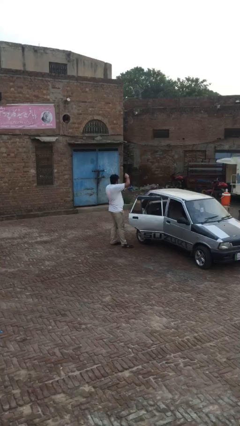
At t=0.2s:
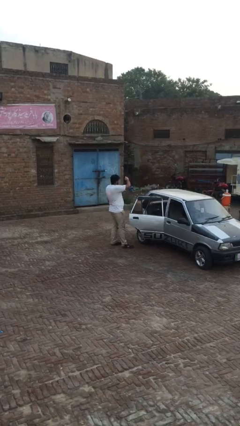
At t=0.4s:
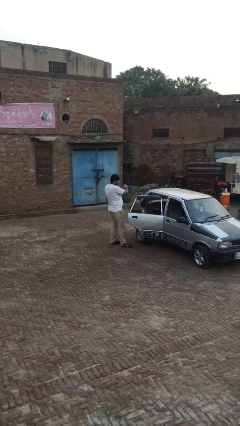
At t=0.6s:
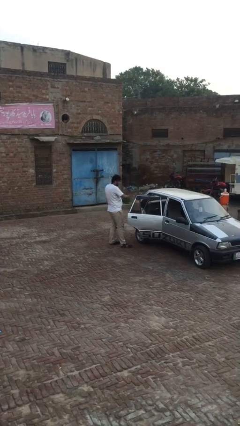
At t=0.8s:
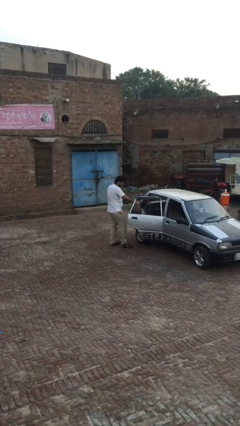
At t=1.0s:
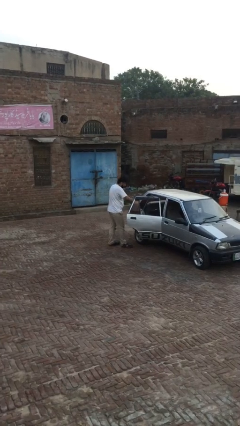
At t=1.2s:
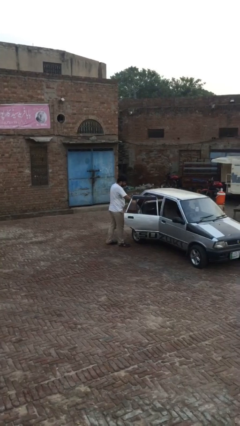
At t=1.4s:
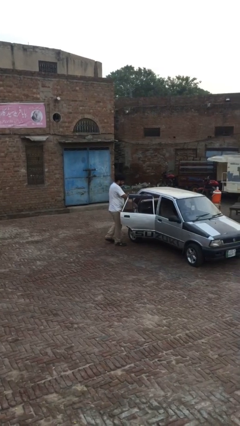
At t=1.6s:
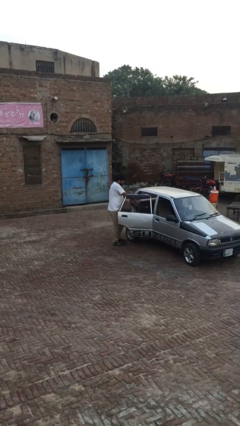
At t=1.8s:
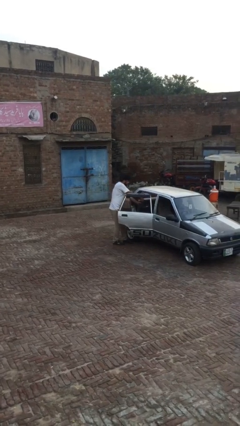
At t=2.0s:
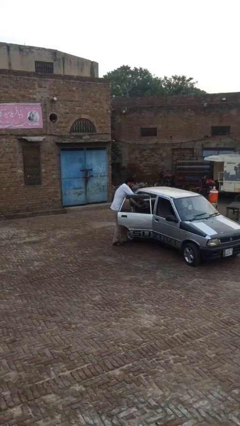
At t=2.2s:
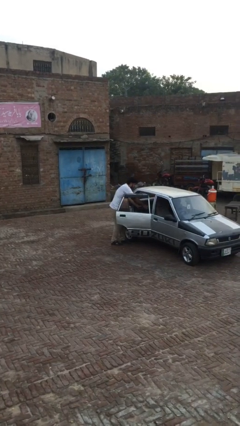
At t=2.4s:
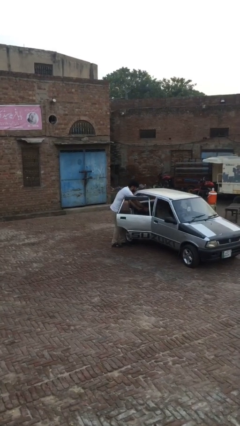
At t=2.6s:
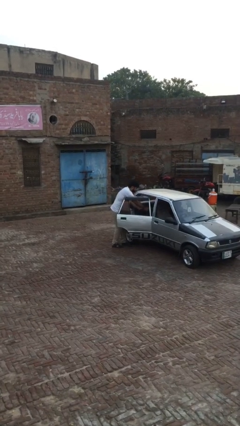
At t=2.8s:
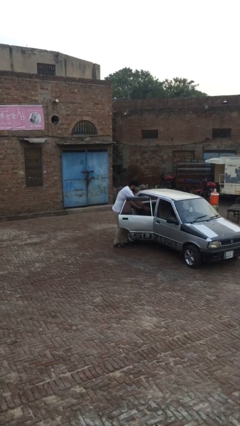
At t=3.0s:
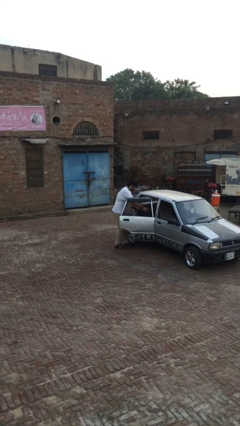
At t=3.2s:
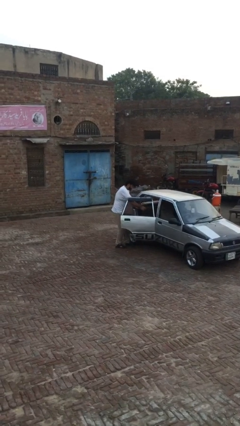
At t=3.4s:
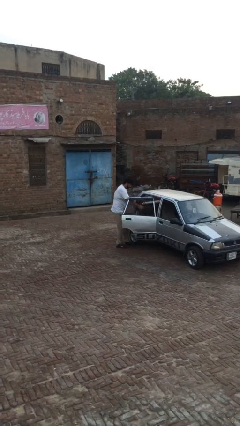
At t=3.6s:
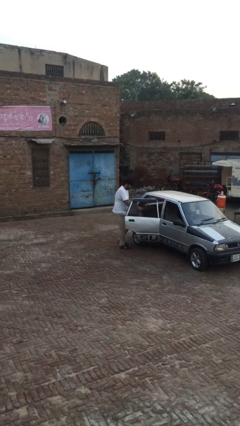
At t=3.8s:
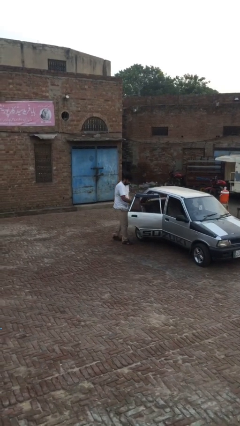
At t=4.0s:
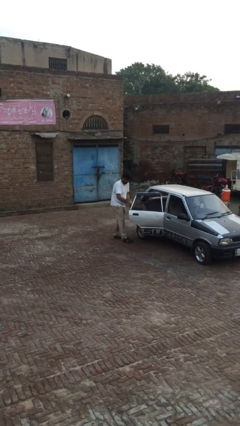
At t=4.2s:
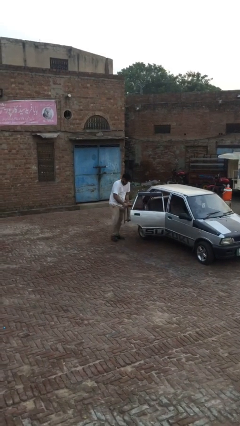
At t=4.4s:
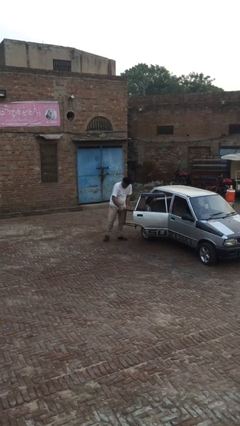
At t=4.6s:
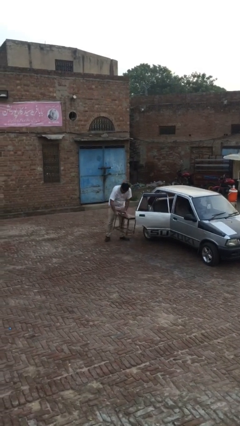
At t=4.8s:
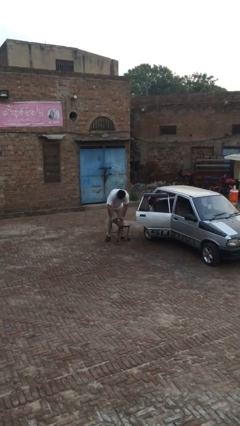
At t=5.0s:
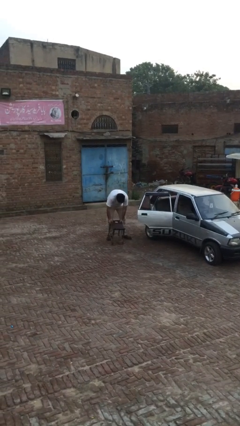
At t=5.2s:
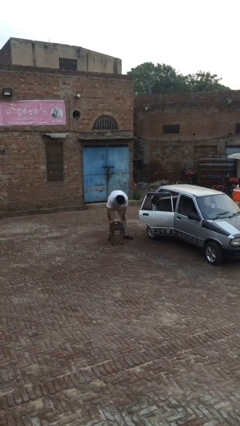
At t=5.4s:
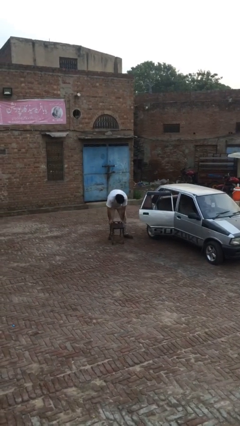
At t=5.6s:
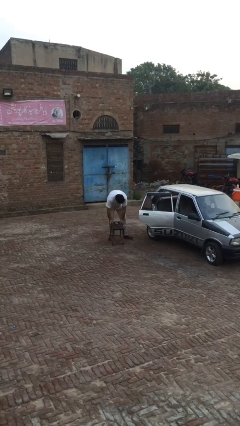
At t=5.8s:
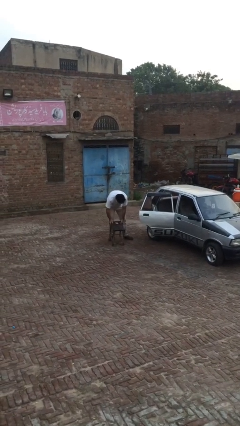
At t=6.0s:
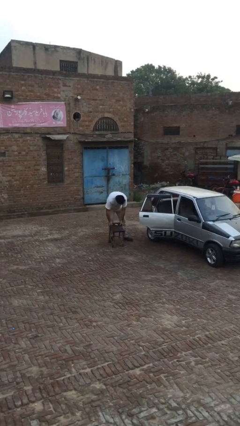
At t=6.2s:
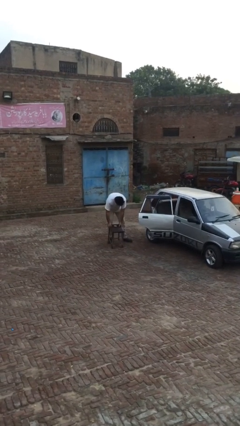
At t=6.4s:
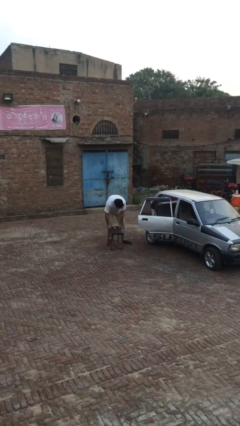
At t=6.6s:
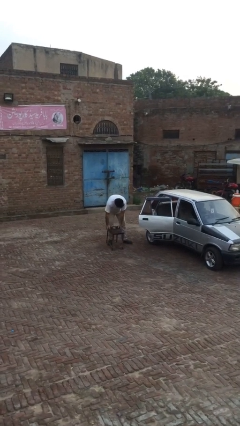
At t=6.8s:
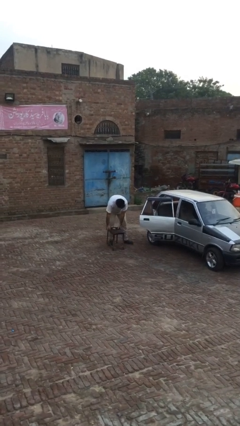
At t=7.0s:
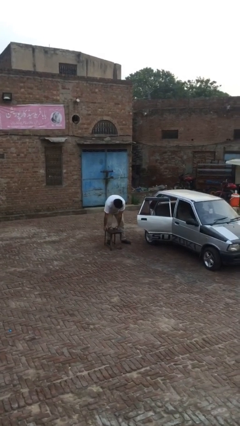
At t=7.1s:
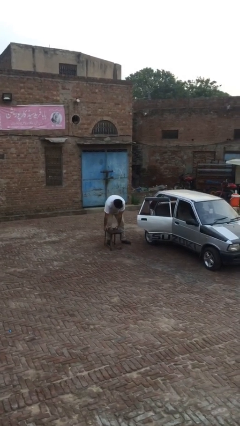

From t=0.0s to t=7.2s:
person unloads car

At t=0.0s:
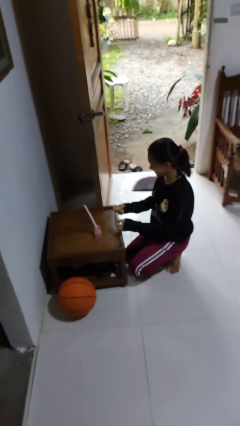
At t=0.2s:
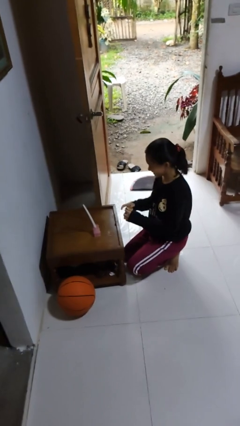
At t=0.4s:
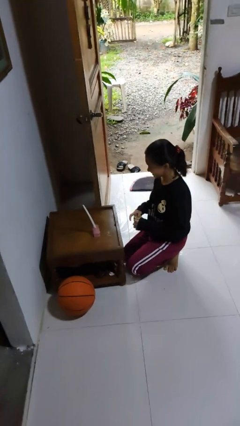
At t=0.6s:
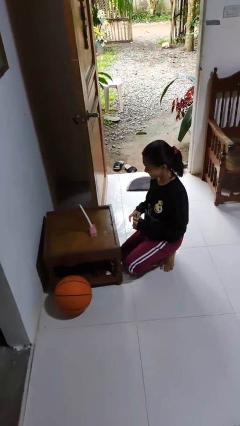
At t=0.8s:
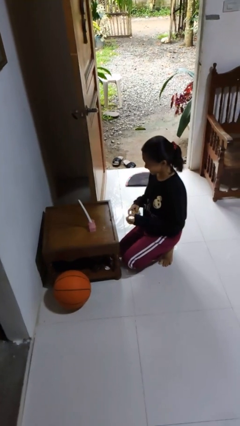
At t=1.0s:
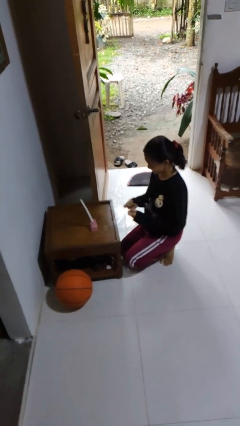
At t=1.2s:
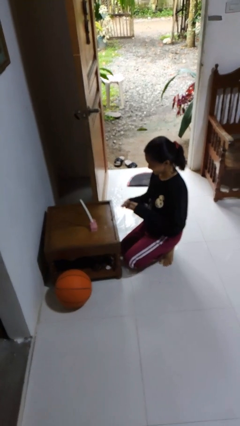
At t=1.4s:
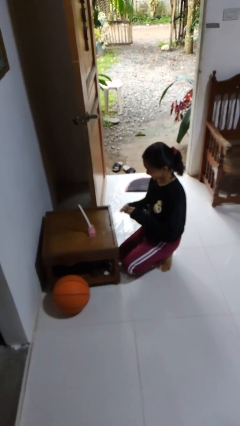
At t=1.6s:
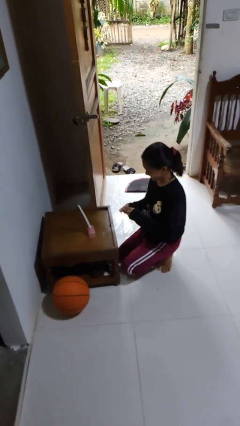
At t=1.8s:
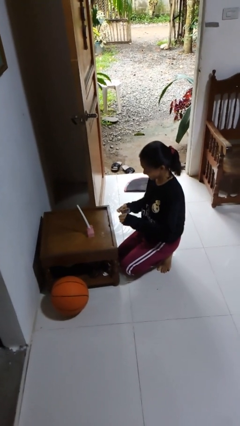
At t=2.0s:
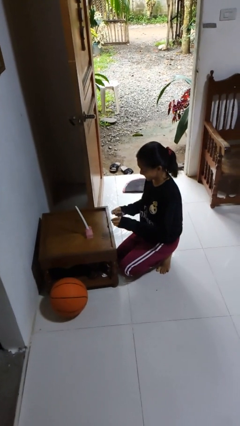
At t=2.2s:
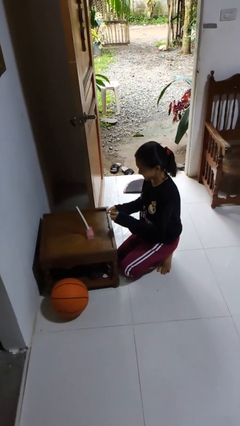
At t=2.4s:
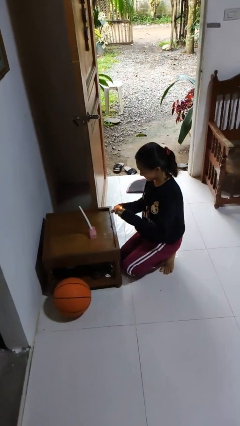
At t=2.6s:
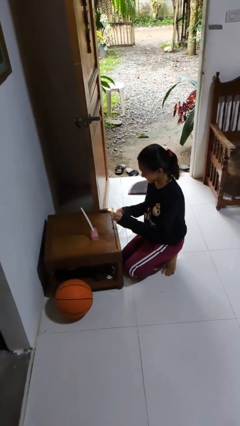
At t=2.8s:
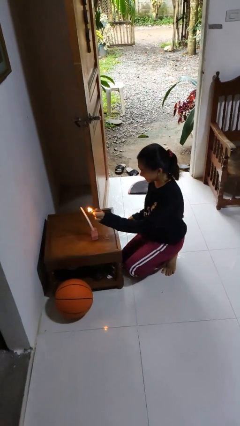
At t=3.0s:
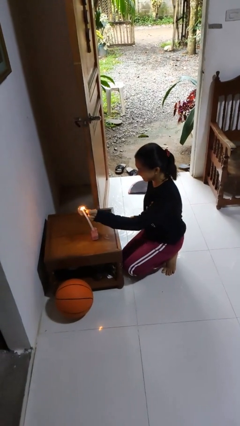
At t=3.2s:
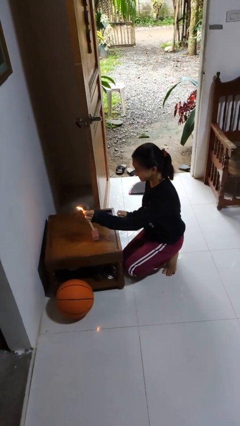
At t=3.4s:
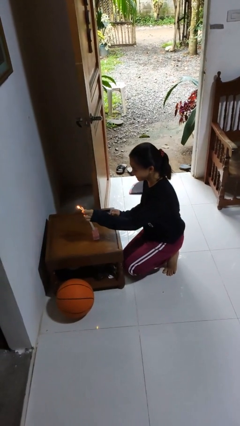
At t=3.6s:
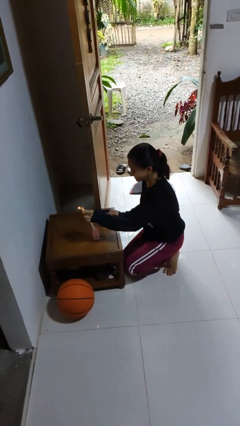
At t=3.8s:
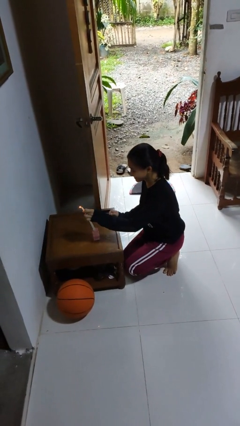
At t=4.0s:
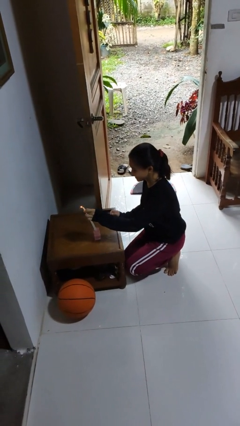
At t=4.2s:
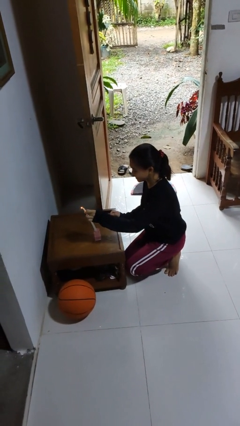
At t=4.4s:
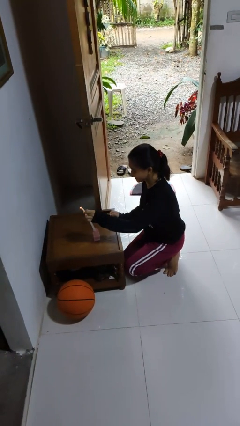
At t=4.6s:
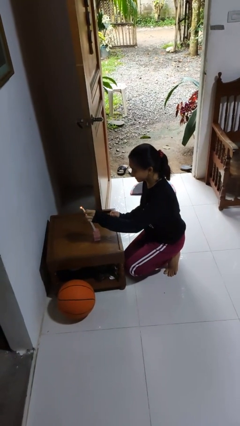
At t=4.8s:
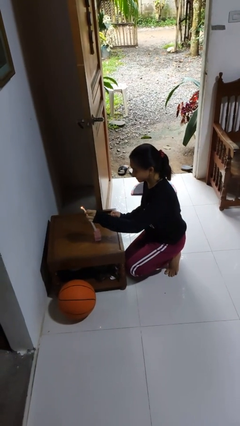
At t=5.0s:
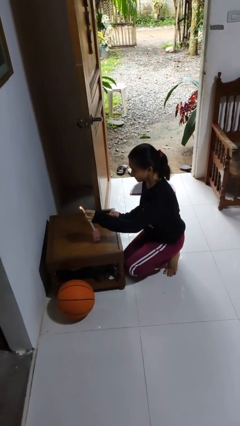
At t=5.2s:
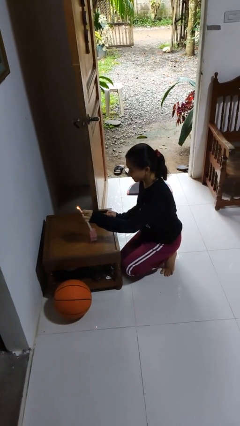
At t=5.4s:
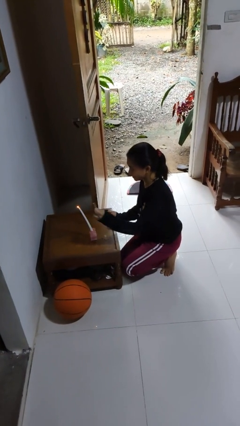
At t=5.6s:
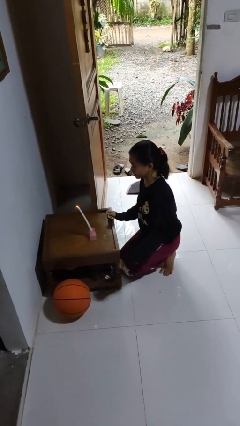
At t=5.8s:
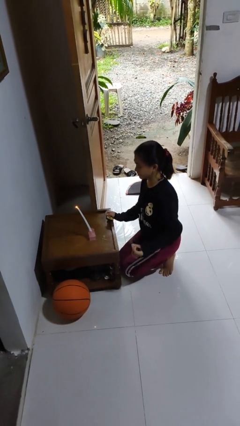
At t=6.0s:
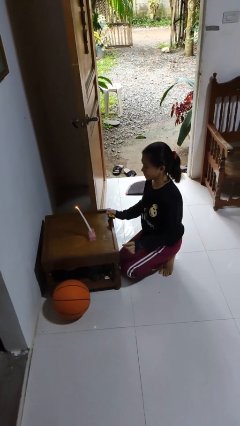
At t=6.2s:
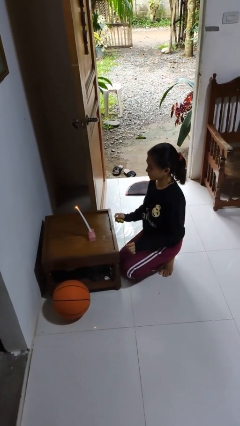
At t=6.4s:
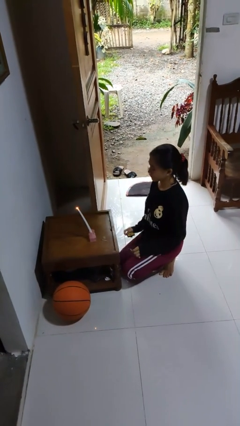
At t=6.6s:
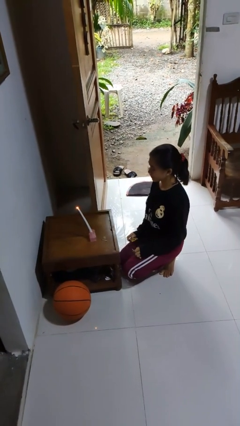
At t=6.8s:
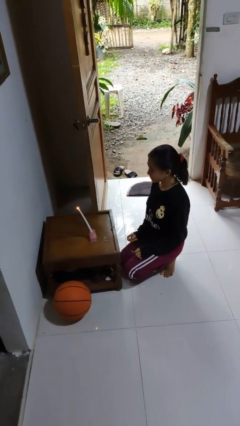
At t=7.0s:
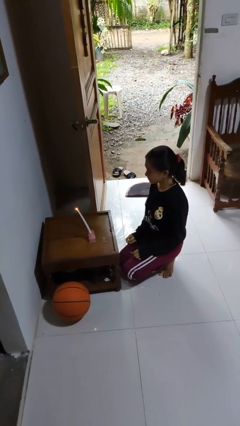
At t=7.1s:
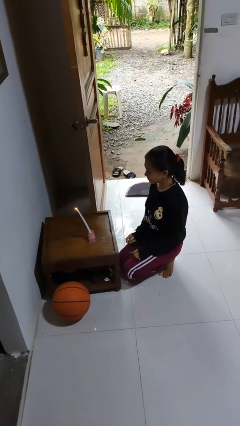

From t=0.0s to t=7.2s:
person lights candle

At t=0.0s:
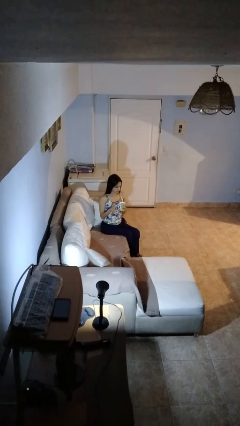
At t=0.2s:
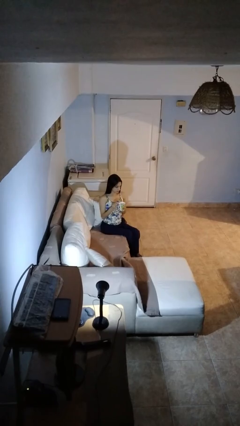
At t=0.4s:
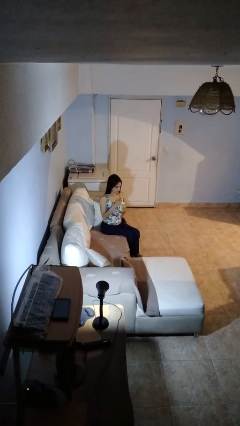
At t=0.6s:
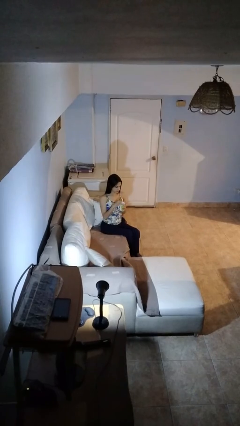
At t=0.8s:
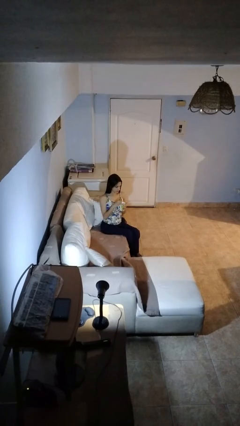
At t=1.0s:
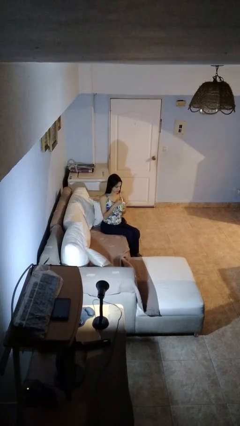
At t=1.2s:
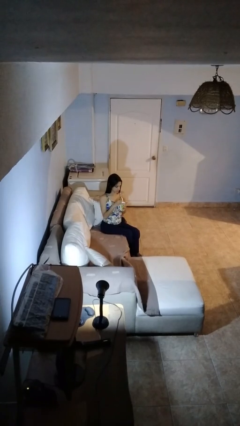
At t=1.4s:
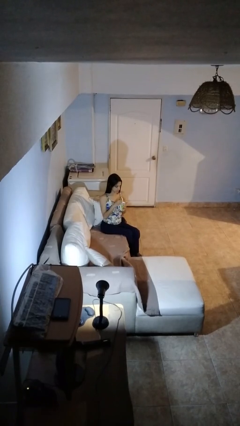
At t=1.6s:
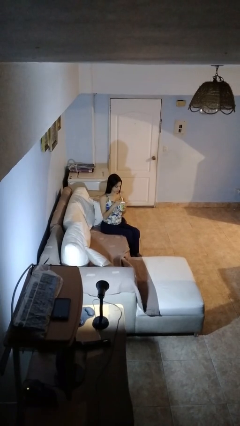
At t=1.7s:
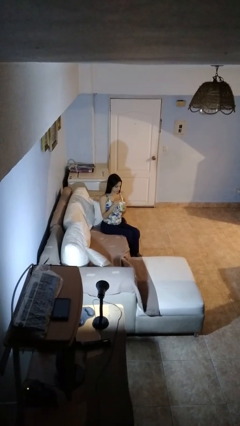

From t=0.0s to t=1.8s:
person stirs mug

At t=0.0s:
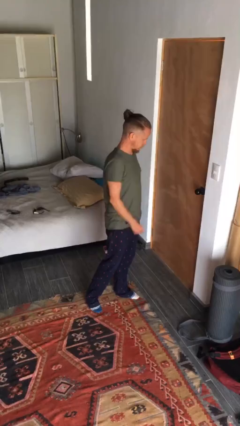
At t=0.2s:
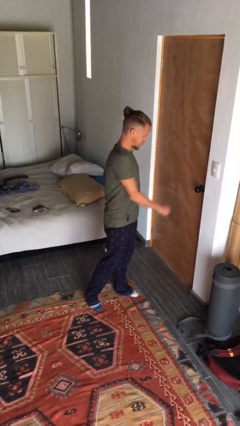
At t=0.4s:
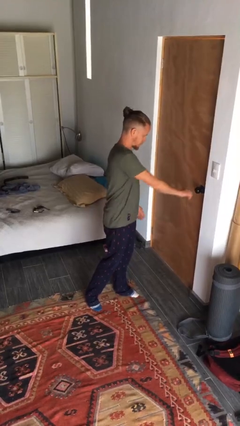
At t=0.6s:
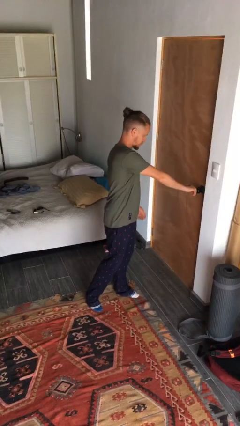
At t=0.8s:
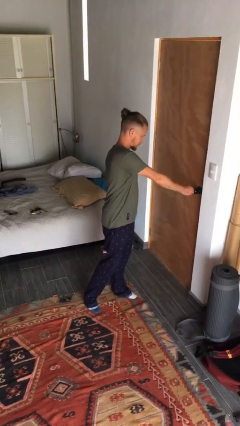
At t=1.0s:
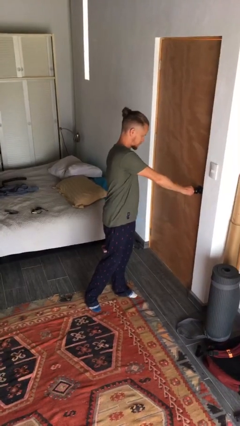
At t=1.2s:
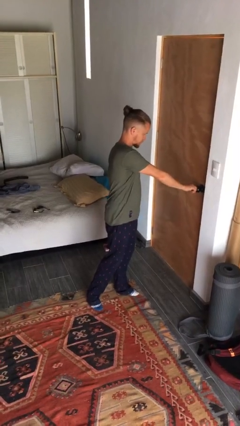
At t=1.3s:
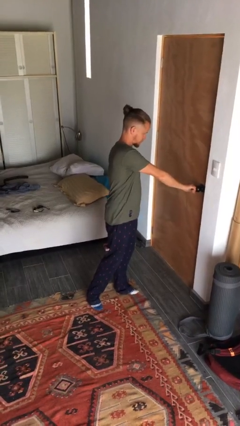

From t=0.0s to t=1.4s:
person locks door with keys
